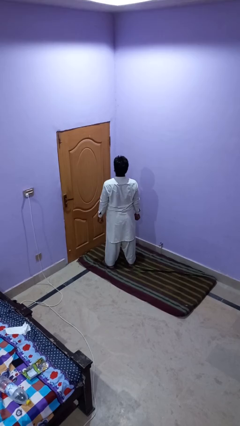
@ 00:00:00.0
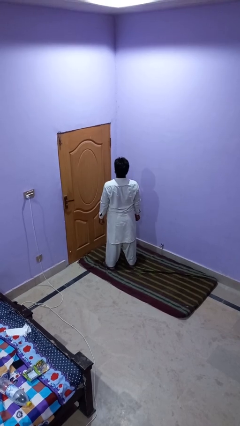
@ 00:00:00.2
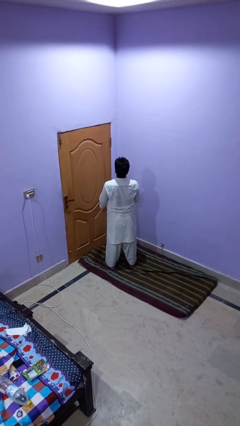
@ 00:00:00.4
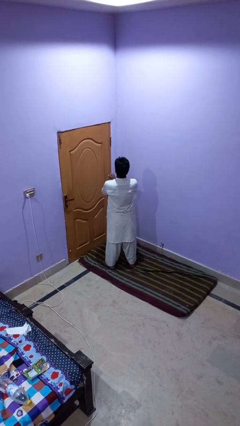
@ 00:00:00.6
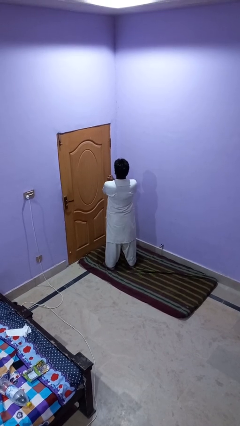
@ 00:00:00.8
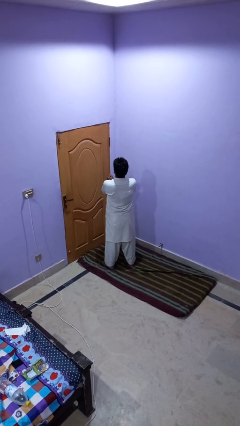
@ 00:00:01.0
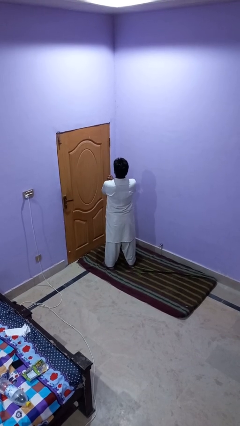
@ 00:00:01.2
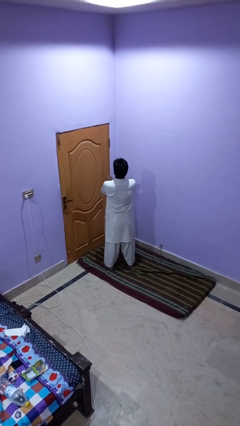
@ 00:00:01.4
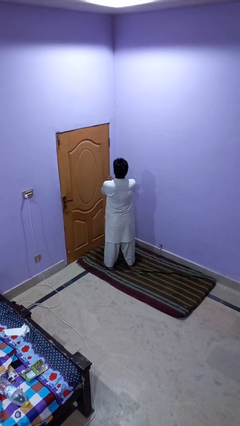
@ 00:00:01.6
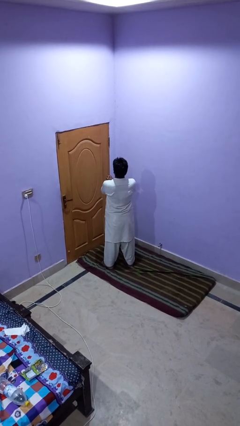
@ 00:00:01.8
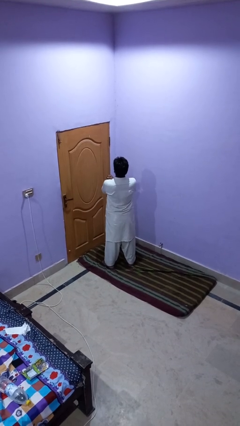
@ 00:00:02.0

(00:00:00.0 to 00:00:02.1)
person crosses arms

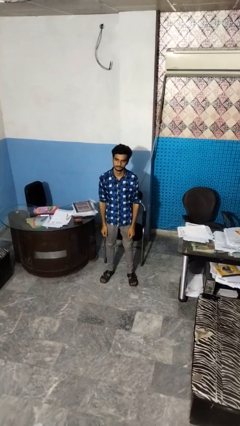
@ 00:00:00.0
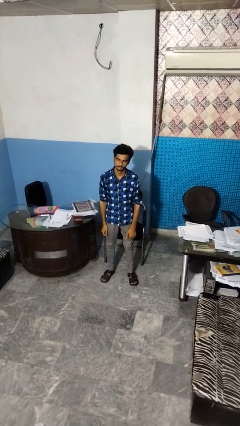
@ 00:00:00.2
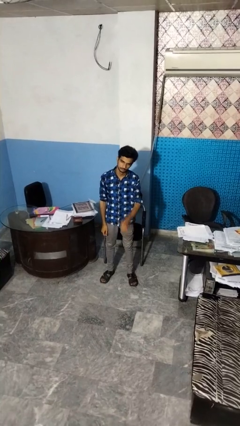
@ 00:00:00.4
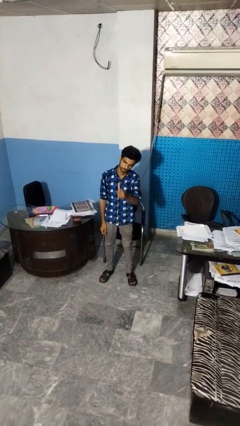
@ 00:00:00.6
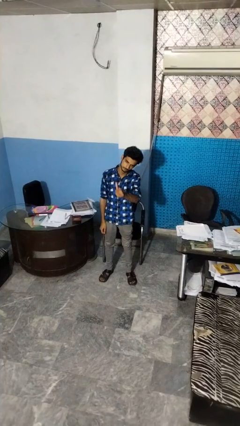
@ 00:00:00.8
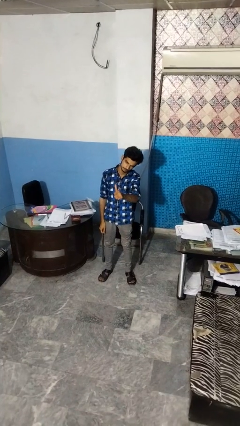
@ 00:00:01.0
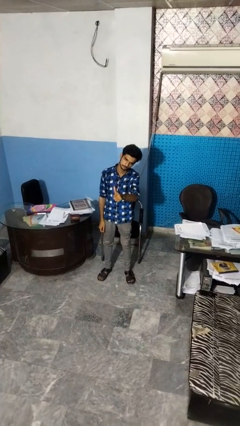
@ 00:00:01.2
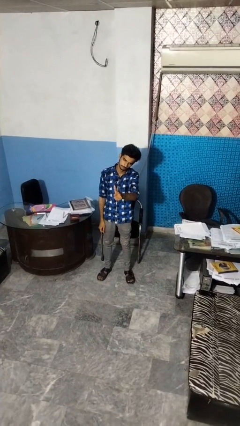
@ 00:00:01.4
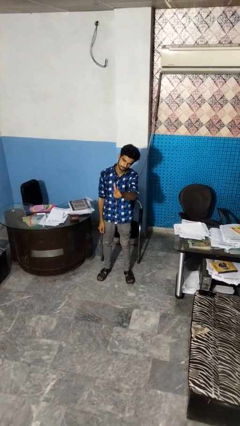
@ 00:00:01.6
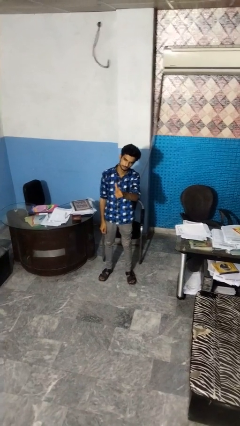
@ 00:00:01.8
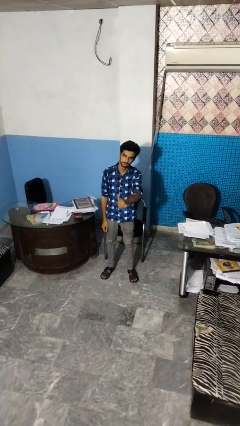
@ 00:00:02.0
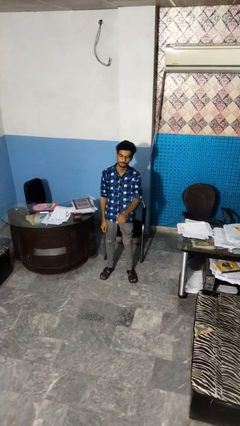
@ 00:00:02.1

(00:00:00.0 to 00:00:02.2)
person gestures thumbs up

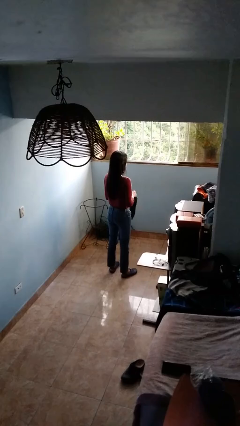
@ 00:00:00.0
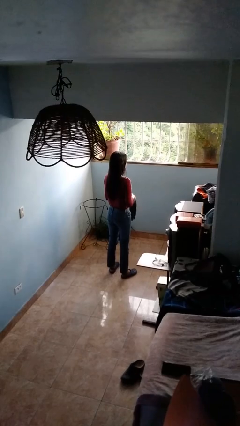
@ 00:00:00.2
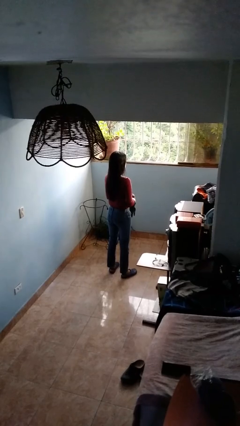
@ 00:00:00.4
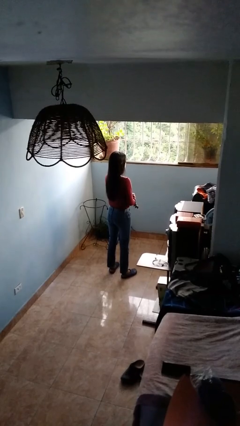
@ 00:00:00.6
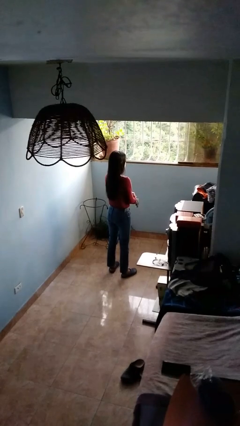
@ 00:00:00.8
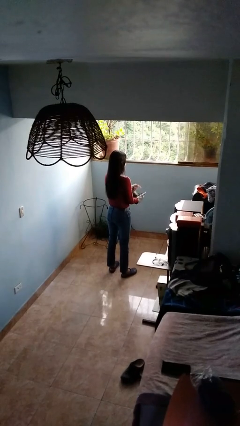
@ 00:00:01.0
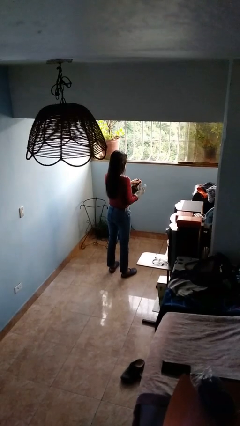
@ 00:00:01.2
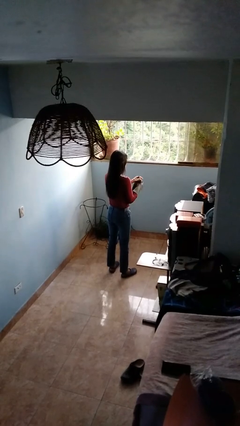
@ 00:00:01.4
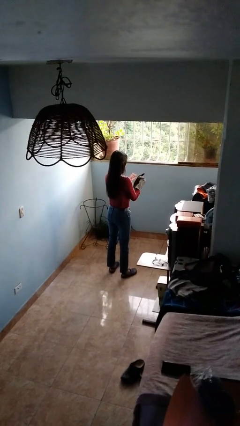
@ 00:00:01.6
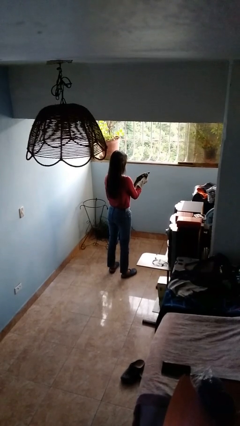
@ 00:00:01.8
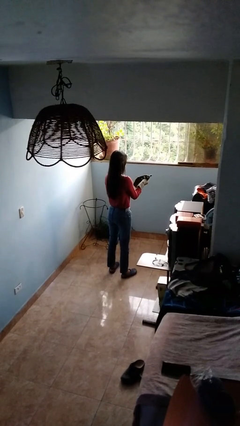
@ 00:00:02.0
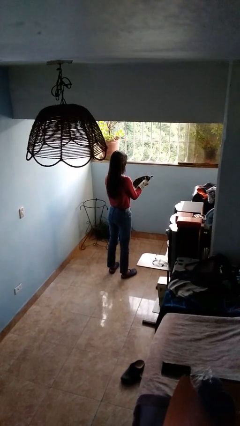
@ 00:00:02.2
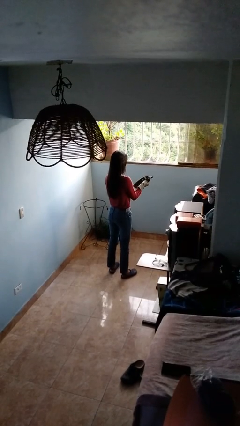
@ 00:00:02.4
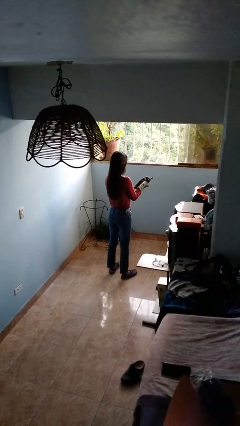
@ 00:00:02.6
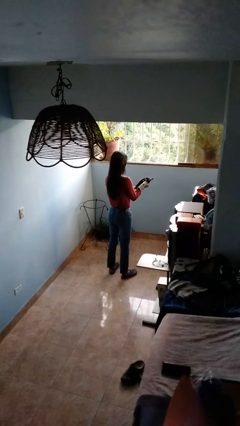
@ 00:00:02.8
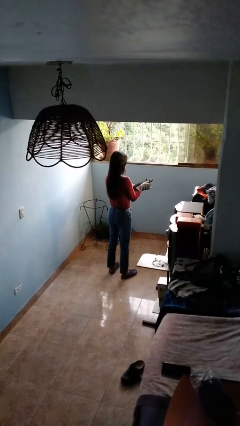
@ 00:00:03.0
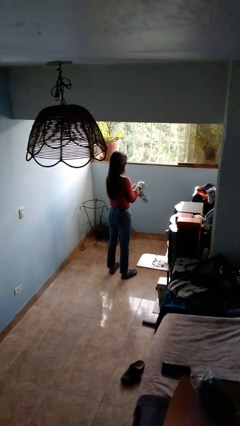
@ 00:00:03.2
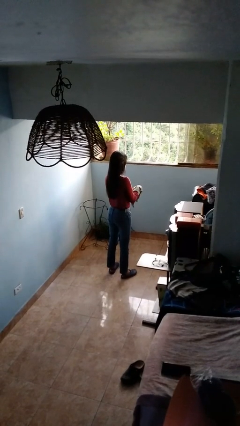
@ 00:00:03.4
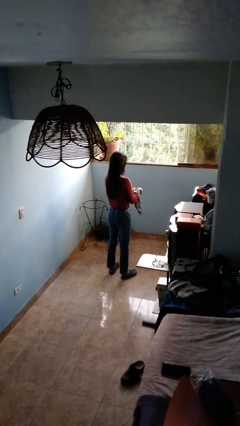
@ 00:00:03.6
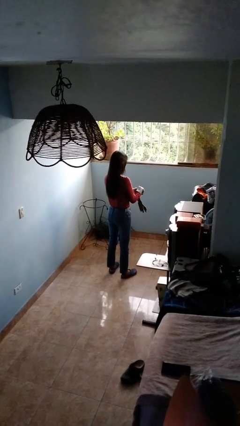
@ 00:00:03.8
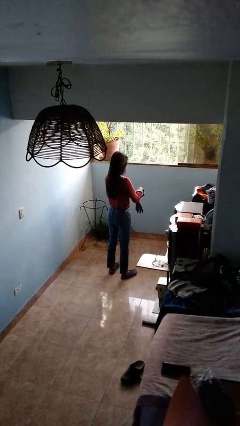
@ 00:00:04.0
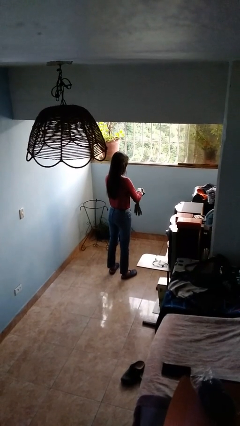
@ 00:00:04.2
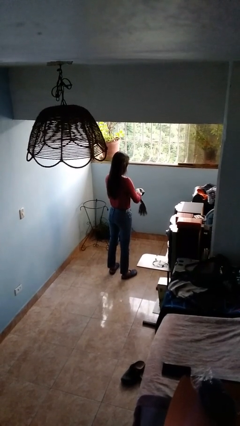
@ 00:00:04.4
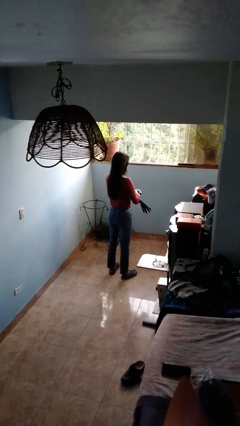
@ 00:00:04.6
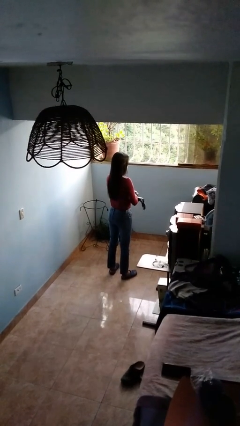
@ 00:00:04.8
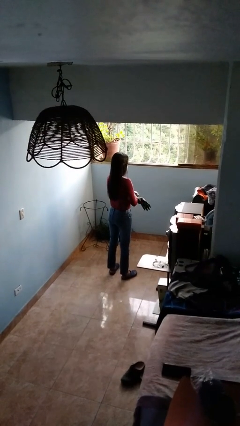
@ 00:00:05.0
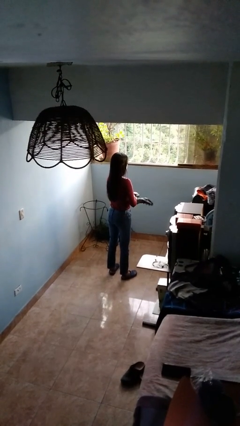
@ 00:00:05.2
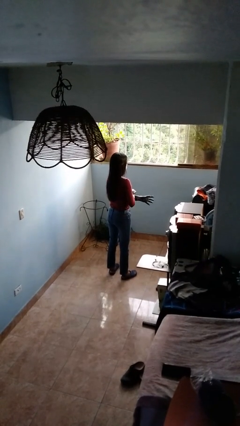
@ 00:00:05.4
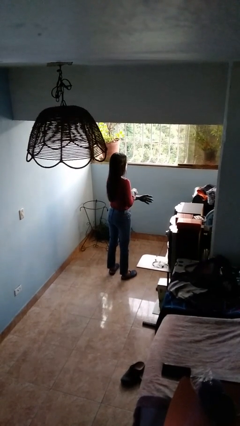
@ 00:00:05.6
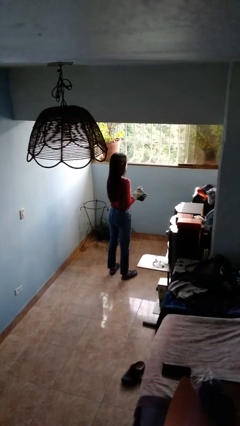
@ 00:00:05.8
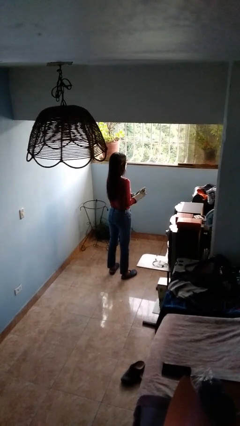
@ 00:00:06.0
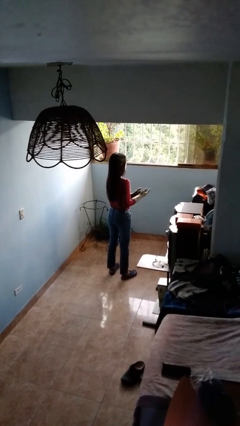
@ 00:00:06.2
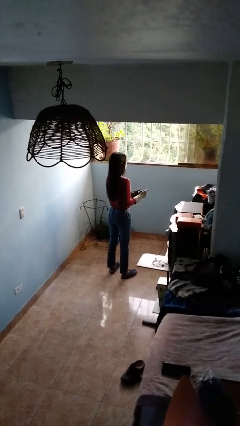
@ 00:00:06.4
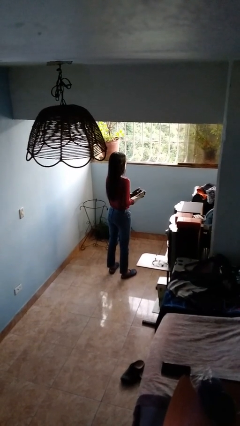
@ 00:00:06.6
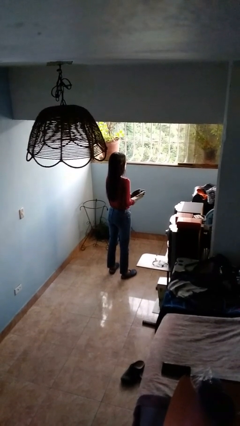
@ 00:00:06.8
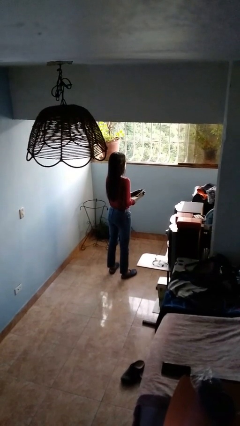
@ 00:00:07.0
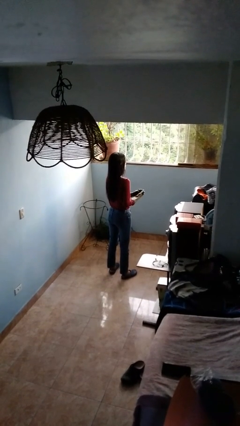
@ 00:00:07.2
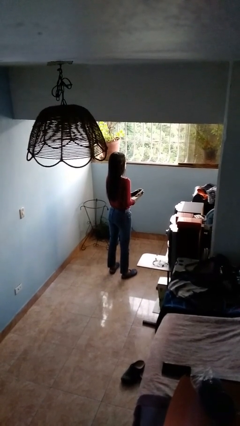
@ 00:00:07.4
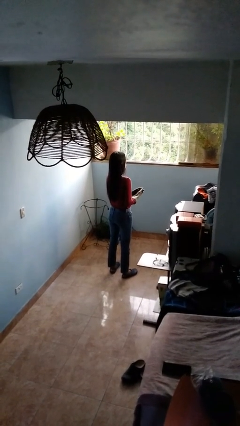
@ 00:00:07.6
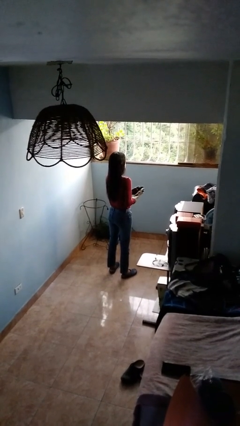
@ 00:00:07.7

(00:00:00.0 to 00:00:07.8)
person puts on gloves

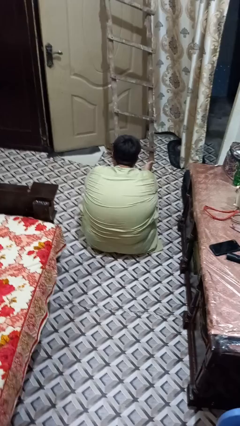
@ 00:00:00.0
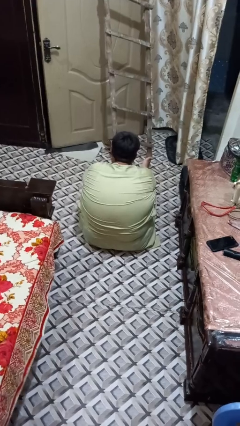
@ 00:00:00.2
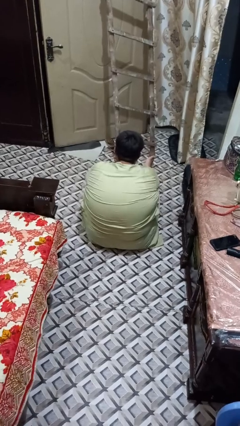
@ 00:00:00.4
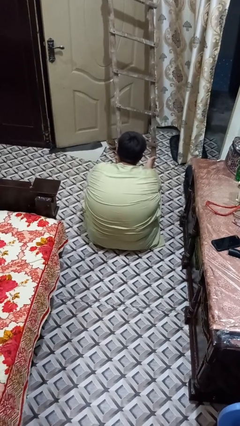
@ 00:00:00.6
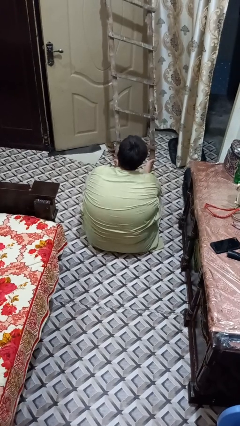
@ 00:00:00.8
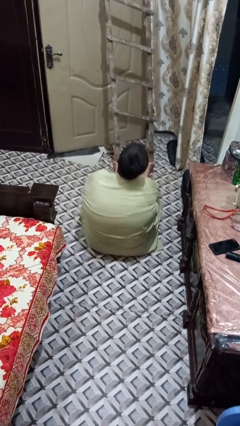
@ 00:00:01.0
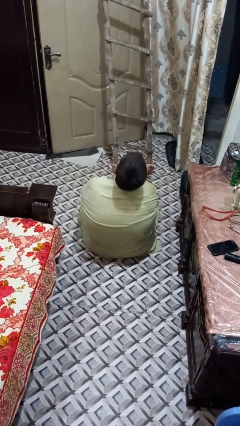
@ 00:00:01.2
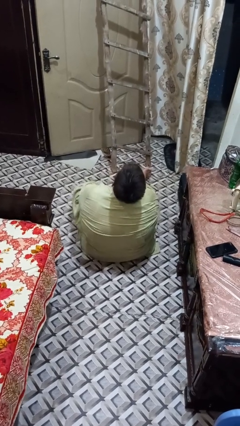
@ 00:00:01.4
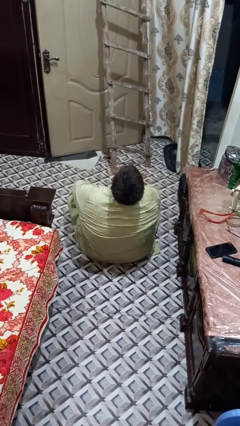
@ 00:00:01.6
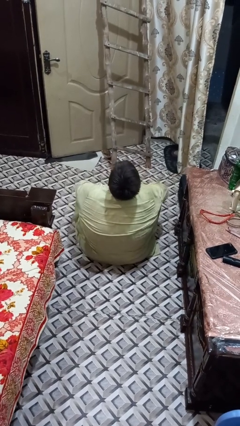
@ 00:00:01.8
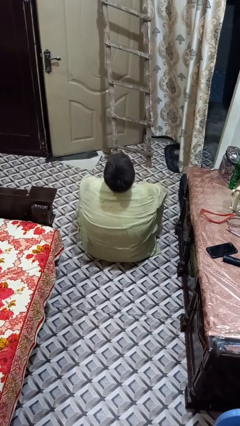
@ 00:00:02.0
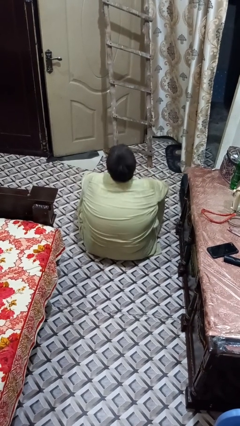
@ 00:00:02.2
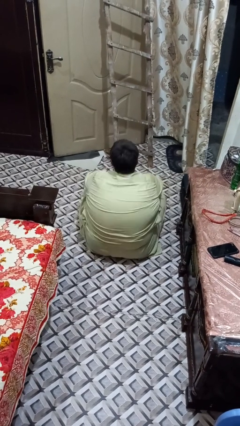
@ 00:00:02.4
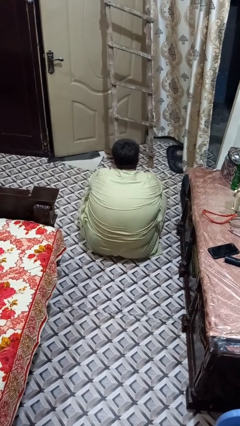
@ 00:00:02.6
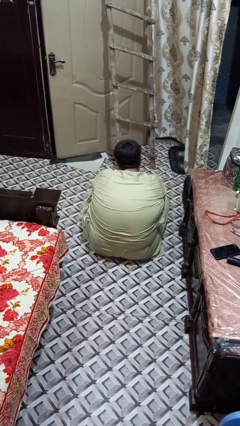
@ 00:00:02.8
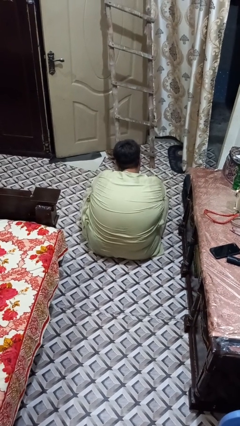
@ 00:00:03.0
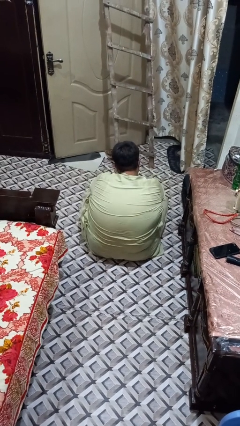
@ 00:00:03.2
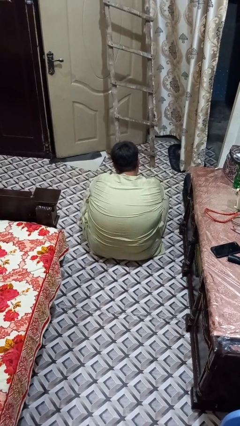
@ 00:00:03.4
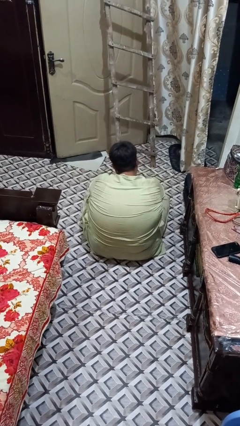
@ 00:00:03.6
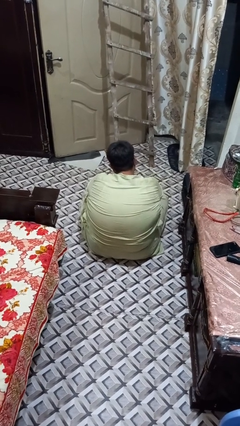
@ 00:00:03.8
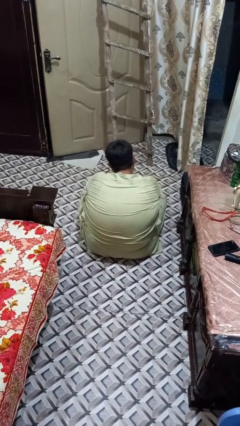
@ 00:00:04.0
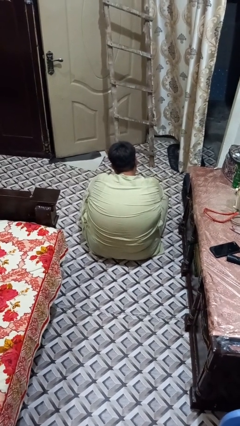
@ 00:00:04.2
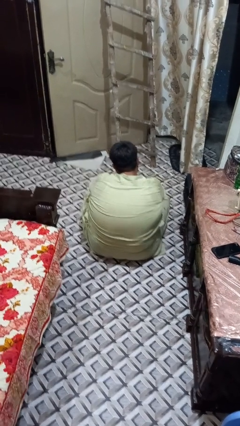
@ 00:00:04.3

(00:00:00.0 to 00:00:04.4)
person crosses legs

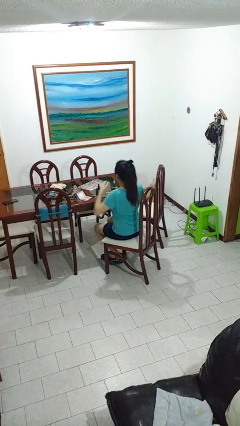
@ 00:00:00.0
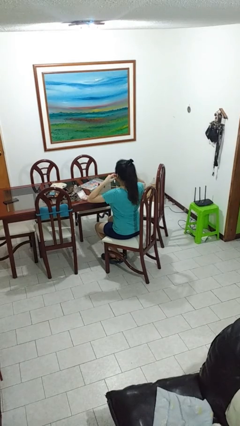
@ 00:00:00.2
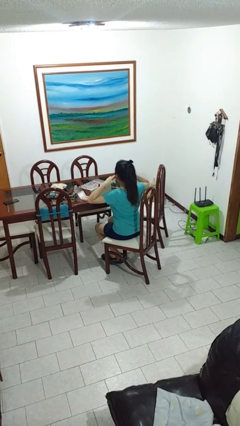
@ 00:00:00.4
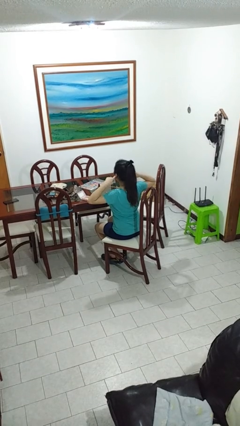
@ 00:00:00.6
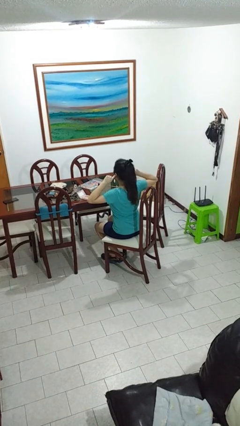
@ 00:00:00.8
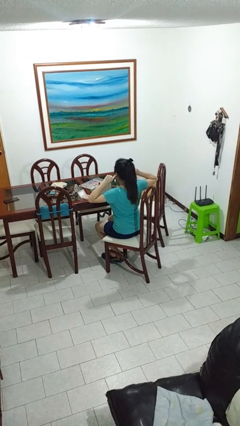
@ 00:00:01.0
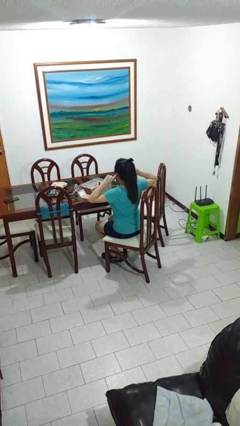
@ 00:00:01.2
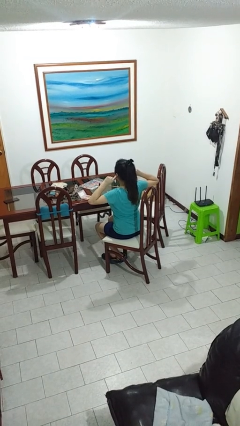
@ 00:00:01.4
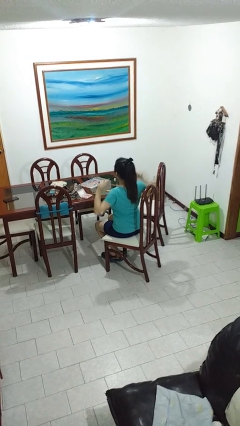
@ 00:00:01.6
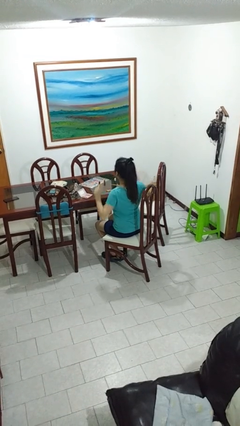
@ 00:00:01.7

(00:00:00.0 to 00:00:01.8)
person puts fingers in ear
